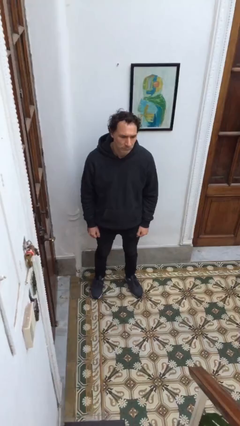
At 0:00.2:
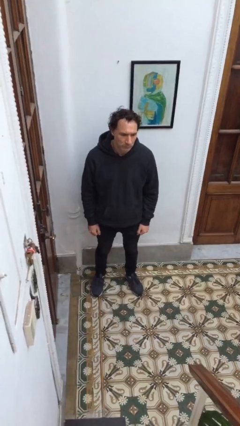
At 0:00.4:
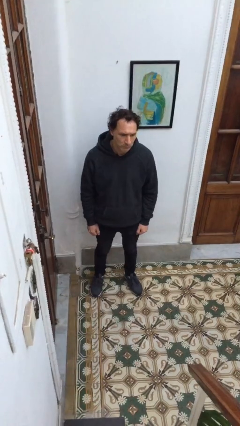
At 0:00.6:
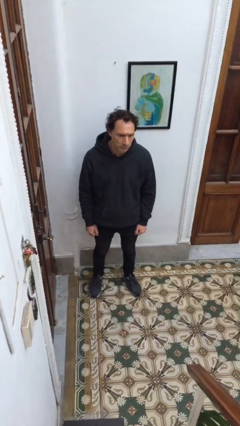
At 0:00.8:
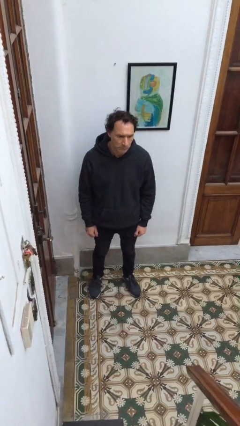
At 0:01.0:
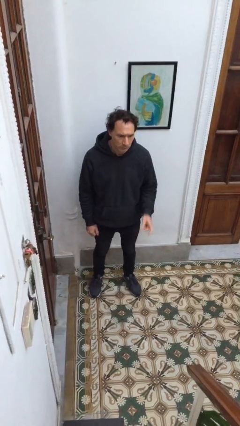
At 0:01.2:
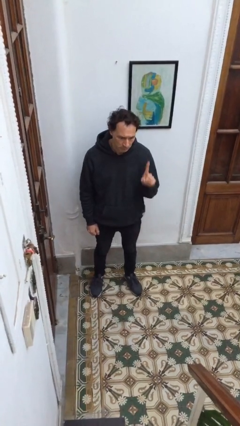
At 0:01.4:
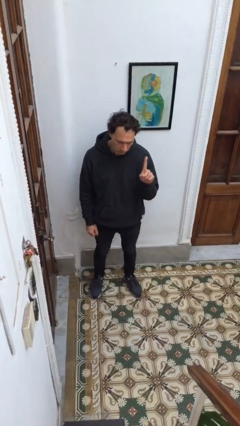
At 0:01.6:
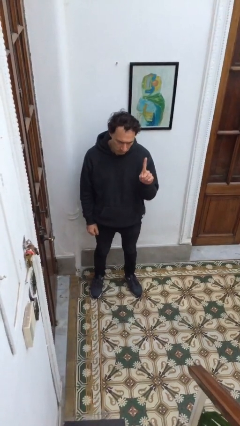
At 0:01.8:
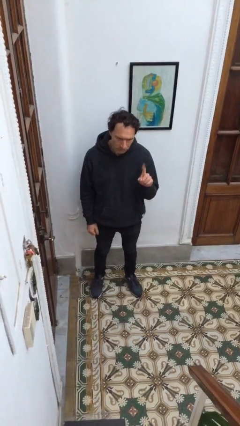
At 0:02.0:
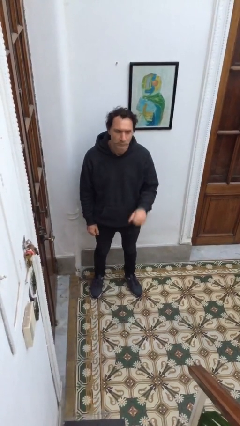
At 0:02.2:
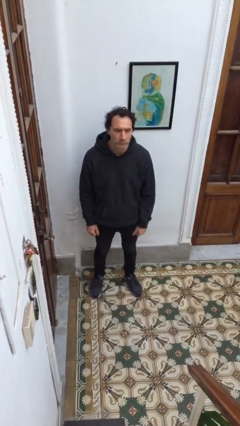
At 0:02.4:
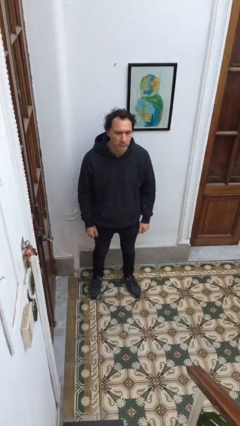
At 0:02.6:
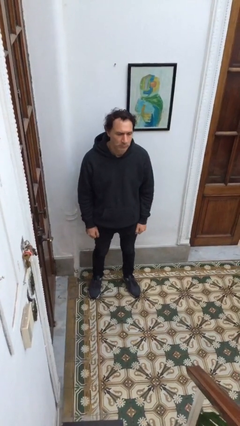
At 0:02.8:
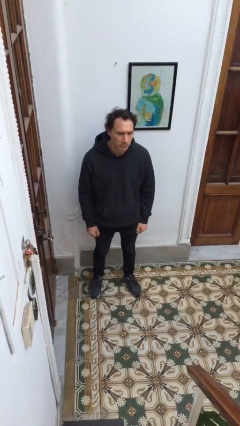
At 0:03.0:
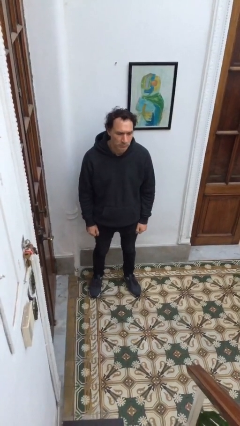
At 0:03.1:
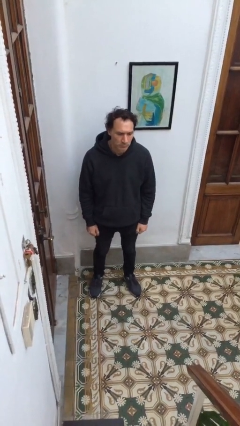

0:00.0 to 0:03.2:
person gestures number one

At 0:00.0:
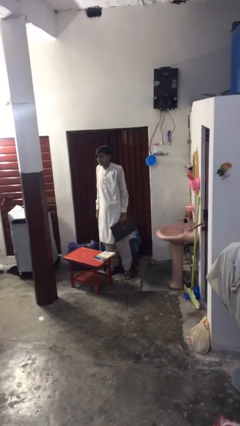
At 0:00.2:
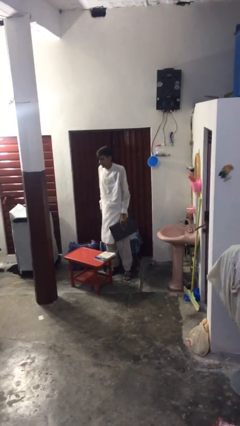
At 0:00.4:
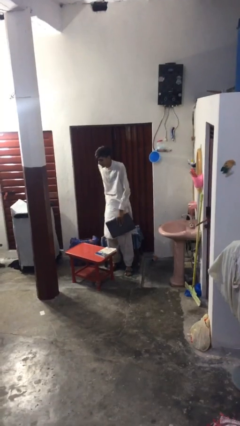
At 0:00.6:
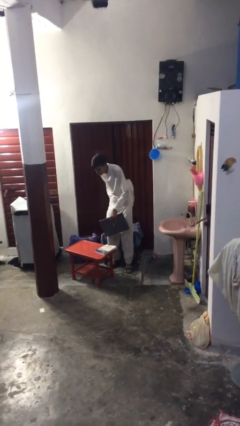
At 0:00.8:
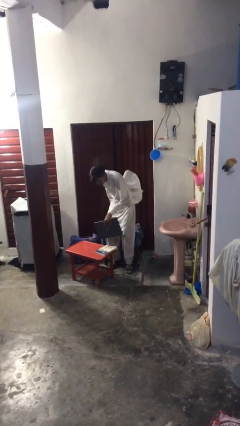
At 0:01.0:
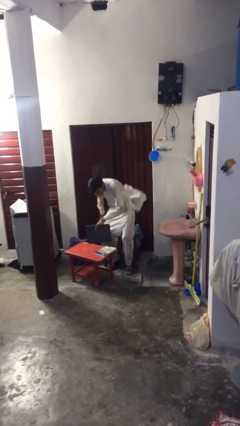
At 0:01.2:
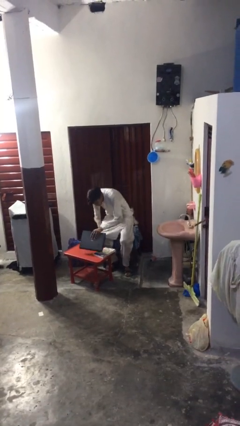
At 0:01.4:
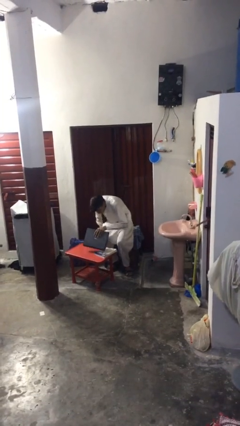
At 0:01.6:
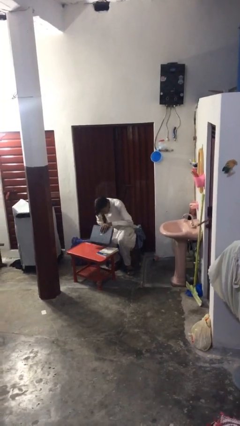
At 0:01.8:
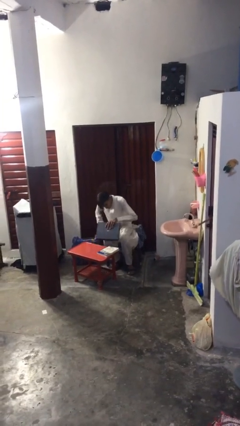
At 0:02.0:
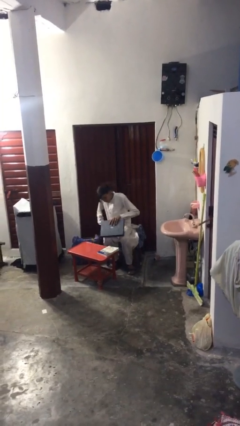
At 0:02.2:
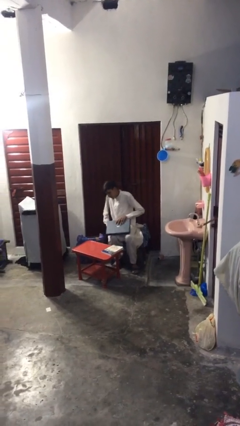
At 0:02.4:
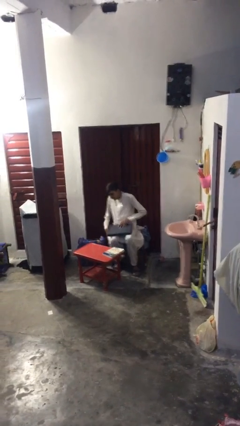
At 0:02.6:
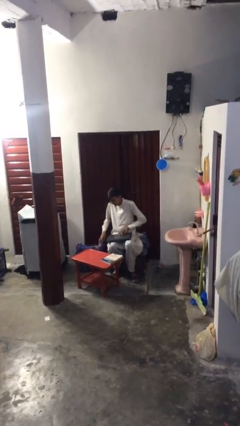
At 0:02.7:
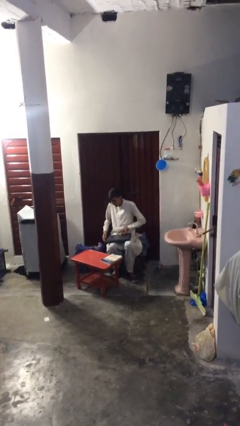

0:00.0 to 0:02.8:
person sits down

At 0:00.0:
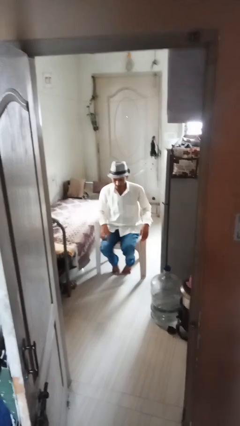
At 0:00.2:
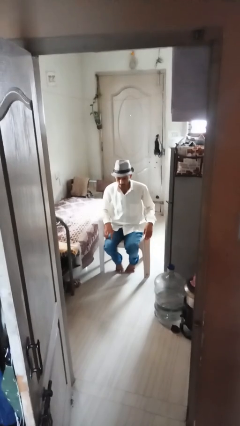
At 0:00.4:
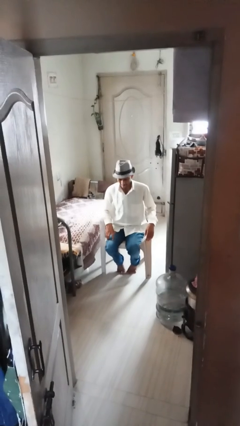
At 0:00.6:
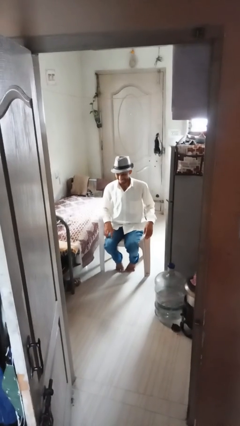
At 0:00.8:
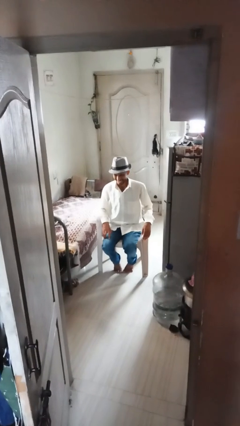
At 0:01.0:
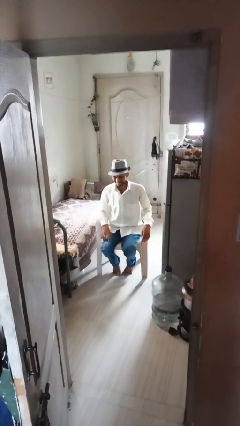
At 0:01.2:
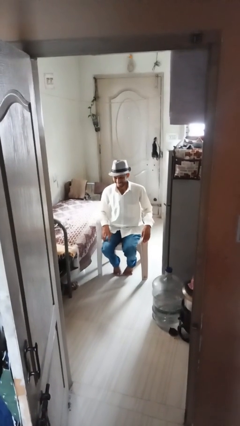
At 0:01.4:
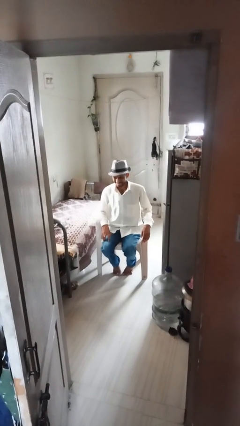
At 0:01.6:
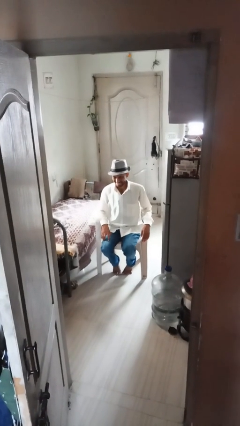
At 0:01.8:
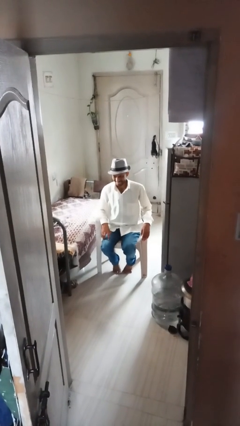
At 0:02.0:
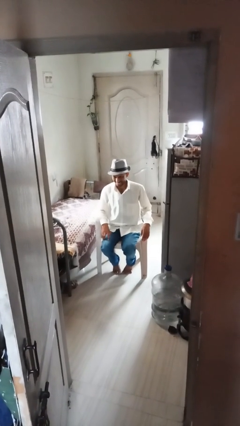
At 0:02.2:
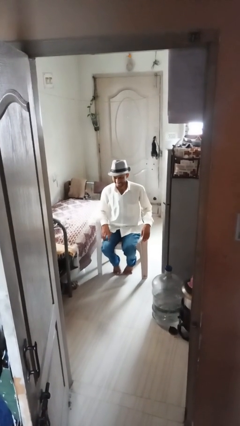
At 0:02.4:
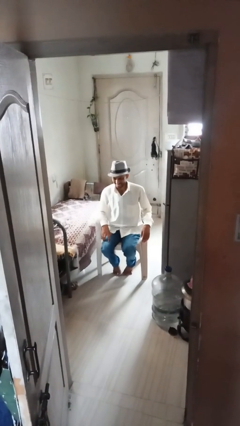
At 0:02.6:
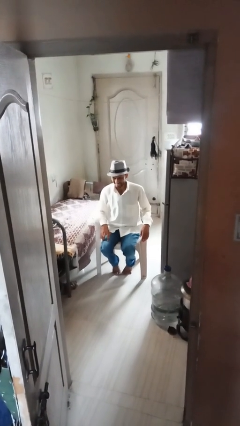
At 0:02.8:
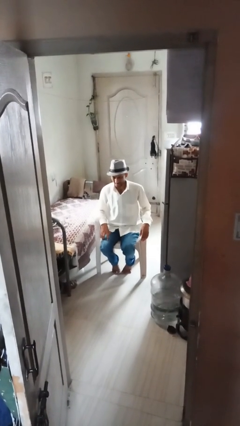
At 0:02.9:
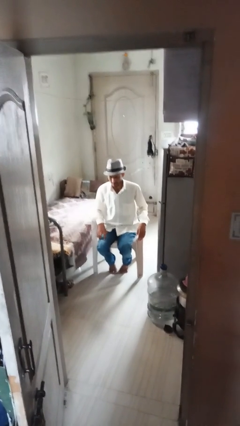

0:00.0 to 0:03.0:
person sticks out tongue

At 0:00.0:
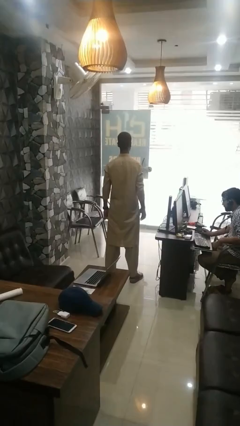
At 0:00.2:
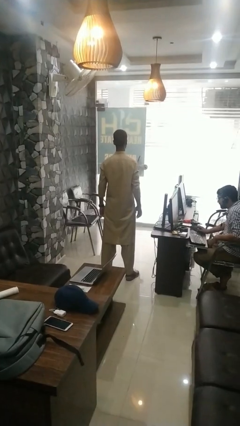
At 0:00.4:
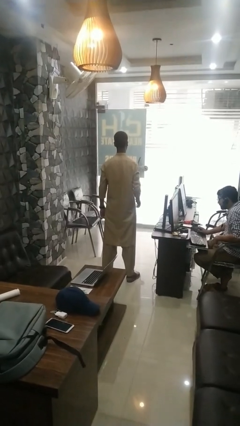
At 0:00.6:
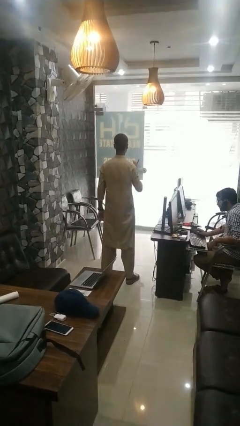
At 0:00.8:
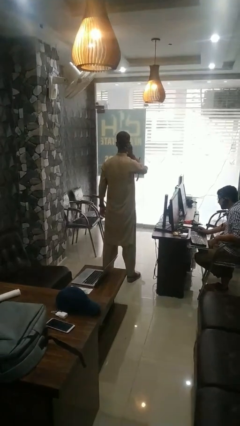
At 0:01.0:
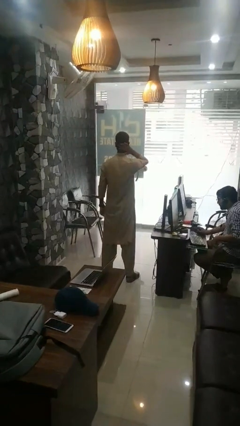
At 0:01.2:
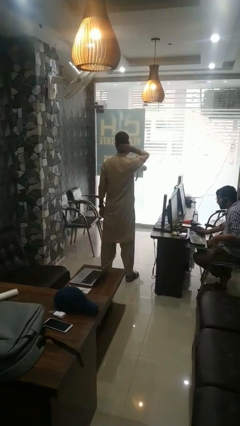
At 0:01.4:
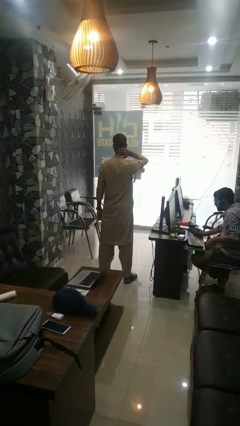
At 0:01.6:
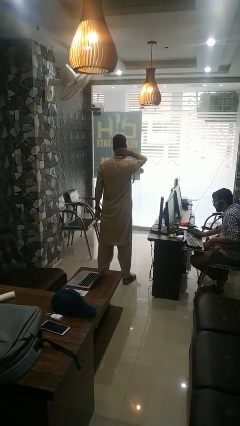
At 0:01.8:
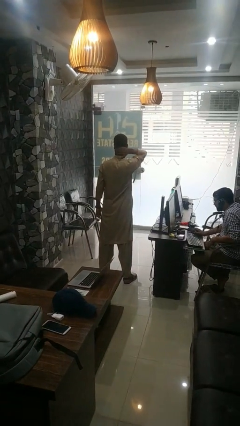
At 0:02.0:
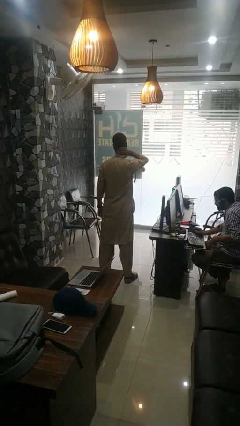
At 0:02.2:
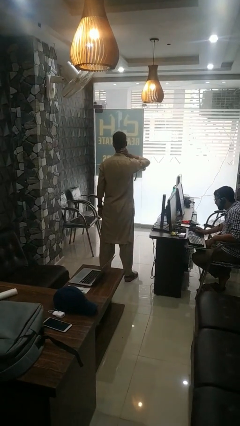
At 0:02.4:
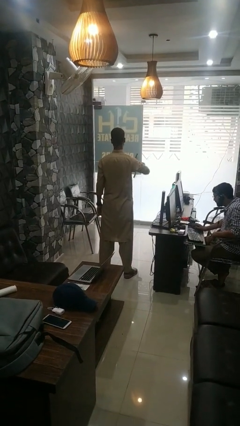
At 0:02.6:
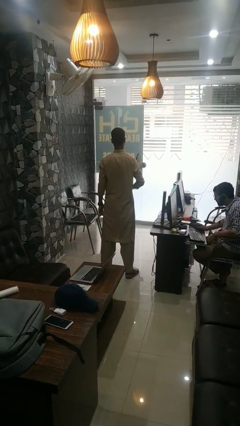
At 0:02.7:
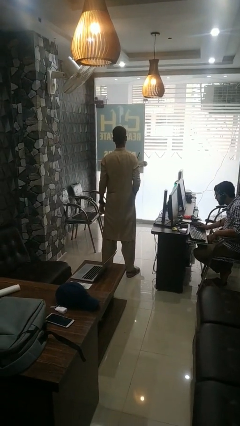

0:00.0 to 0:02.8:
person rubs neck

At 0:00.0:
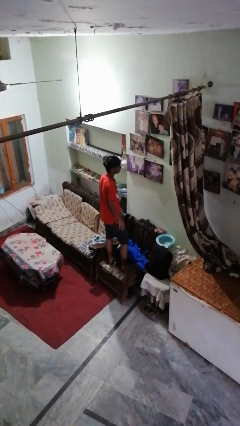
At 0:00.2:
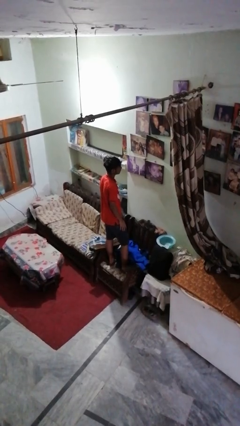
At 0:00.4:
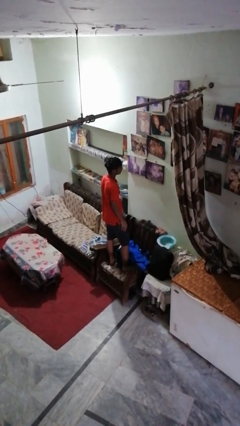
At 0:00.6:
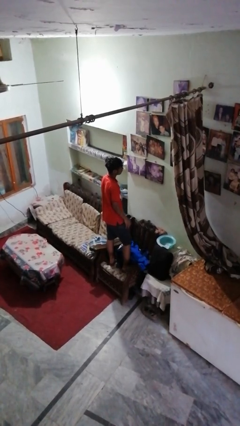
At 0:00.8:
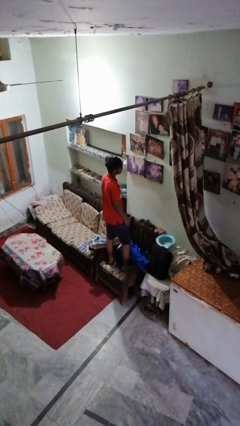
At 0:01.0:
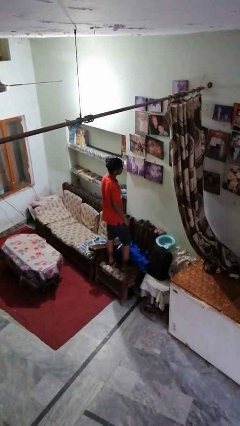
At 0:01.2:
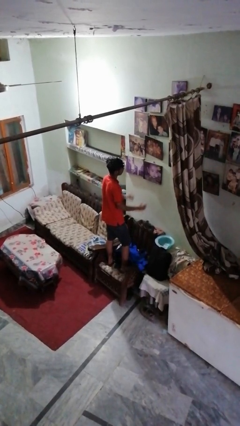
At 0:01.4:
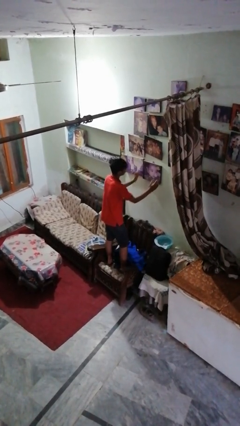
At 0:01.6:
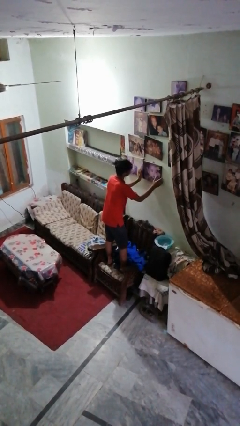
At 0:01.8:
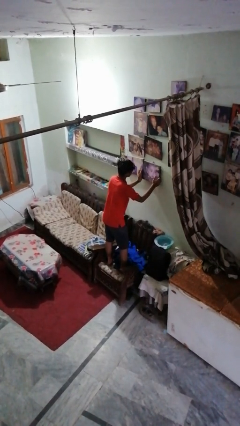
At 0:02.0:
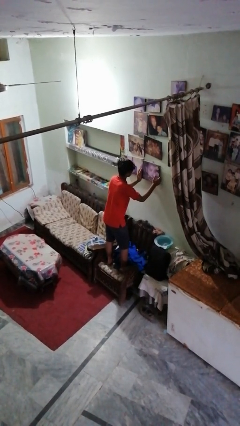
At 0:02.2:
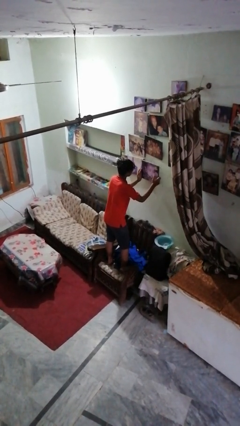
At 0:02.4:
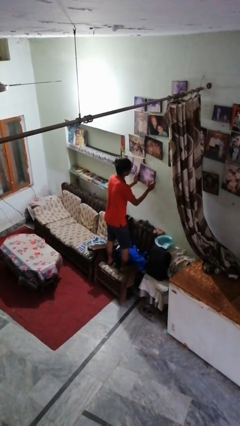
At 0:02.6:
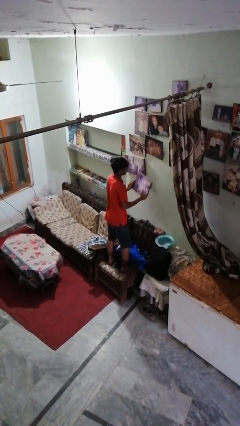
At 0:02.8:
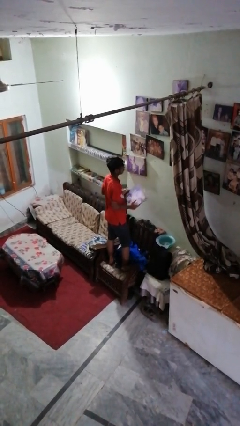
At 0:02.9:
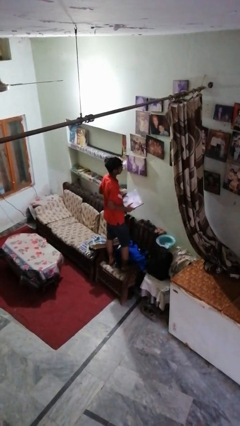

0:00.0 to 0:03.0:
person takes down picture frame

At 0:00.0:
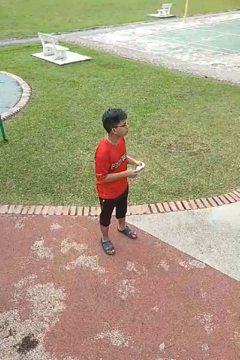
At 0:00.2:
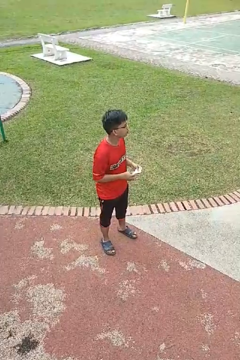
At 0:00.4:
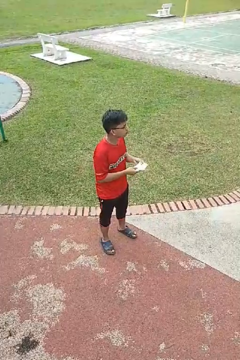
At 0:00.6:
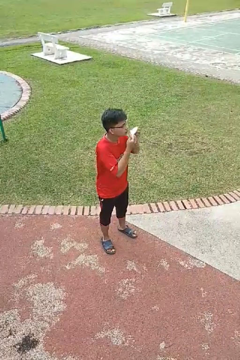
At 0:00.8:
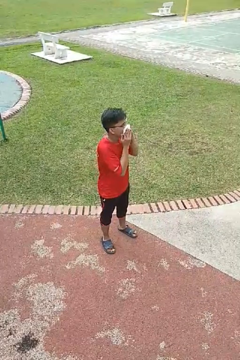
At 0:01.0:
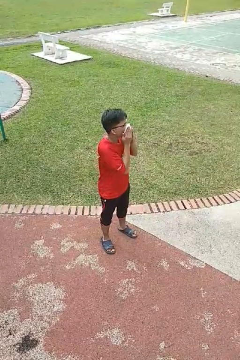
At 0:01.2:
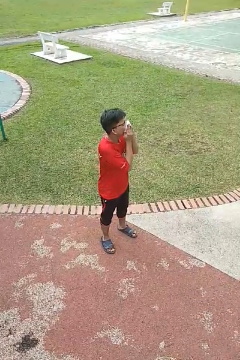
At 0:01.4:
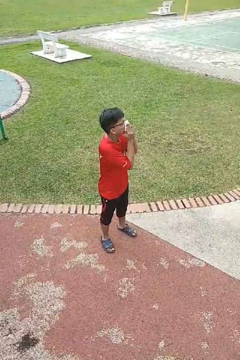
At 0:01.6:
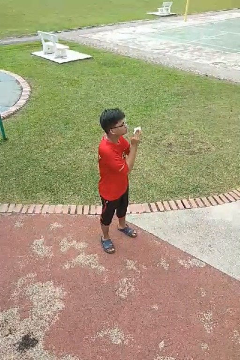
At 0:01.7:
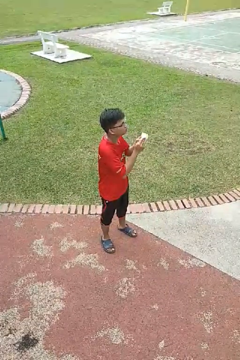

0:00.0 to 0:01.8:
person blows nose

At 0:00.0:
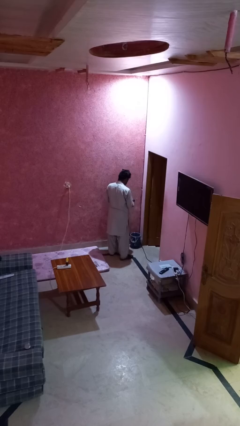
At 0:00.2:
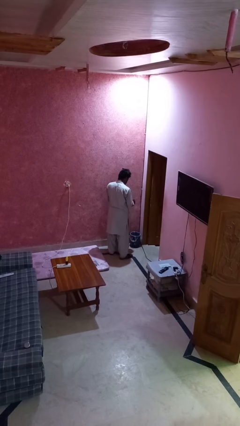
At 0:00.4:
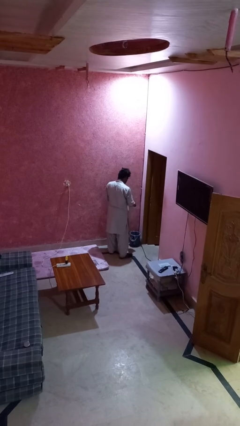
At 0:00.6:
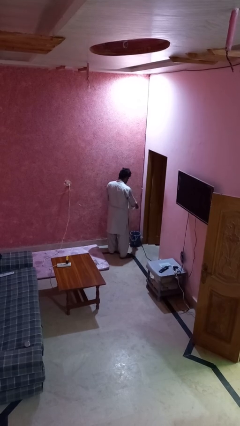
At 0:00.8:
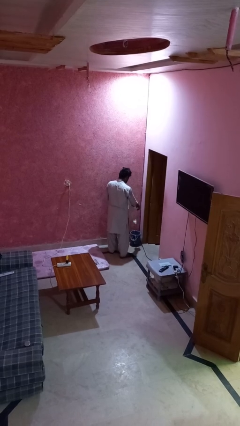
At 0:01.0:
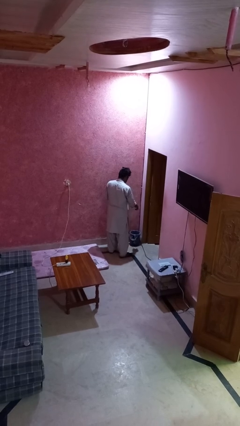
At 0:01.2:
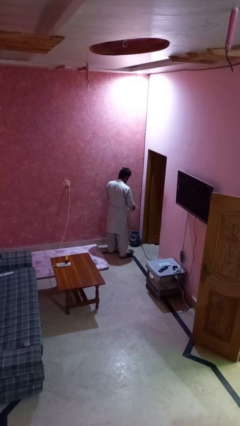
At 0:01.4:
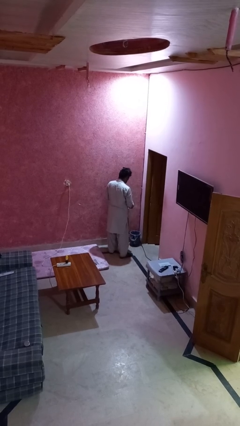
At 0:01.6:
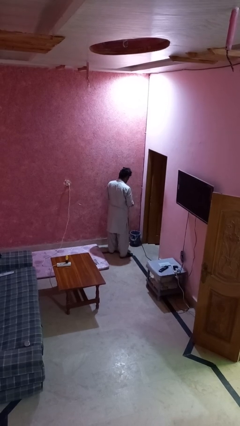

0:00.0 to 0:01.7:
person discards trash
